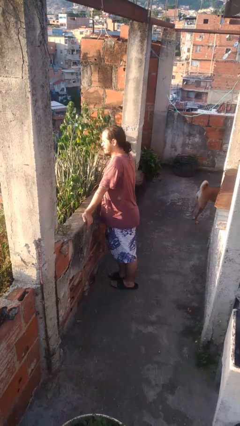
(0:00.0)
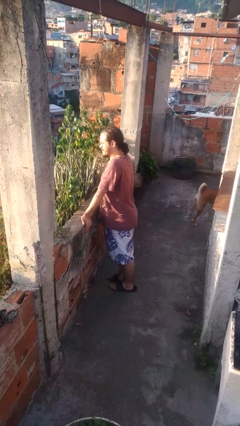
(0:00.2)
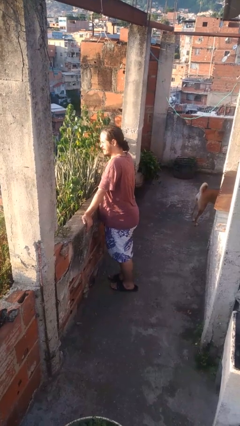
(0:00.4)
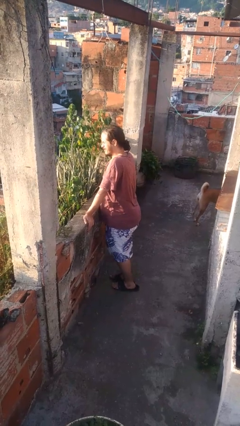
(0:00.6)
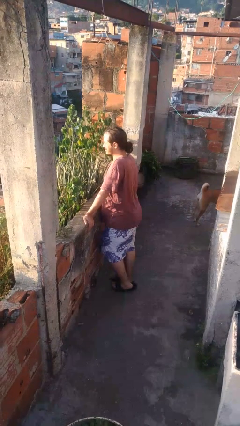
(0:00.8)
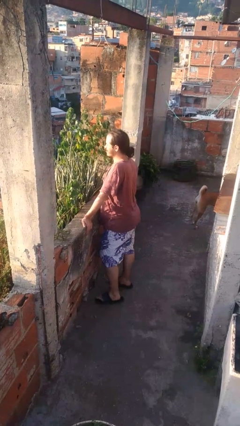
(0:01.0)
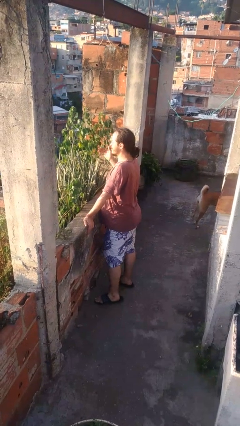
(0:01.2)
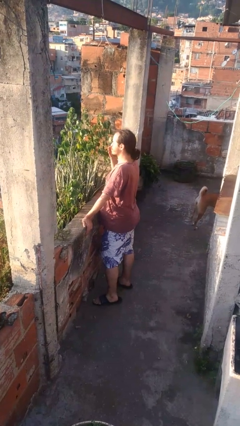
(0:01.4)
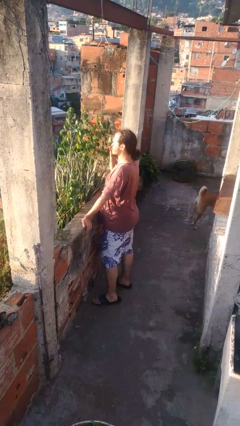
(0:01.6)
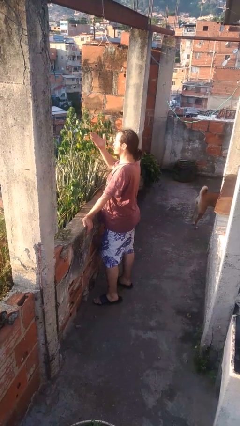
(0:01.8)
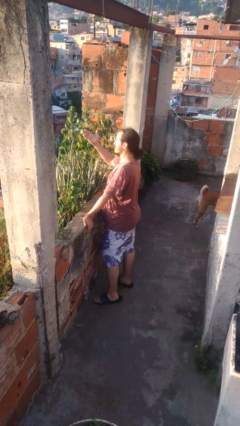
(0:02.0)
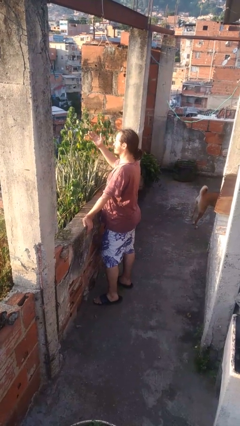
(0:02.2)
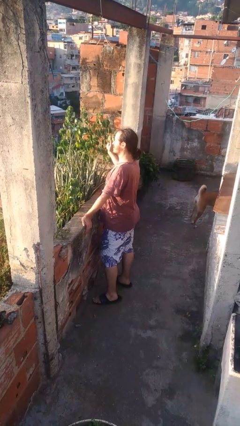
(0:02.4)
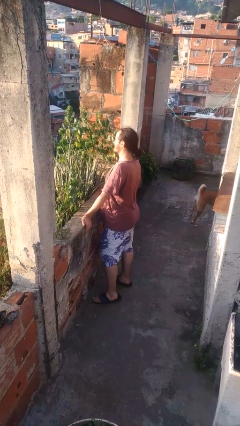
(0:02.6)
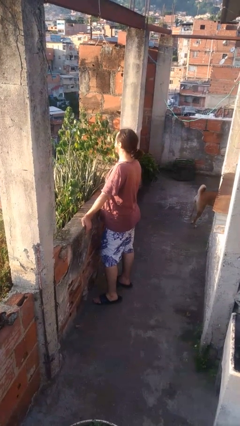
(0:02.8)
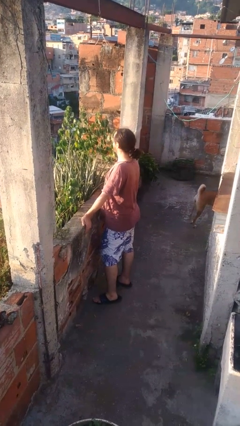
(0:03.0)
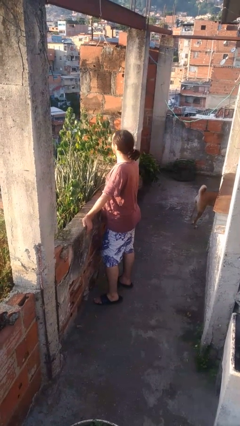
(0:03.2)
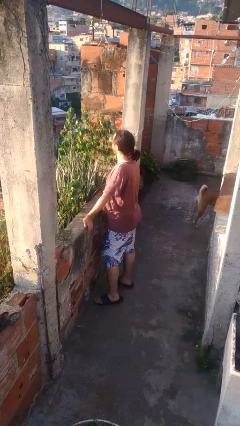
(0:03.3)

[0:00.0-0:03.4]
person gestures blow kiss

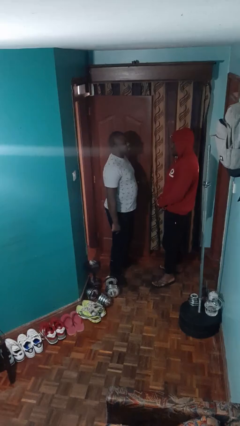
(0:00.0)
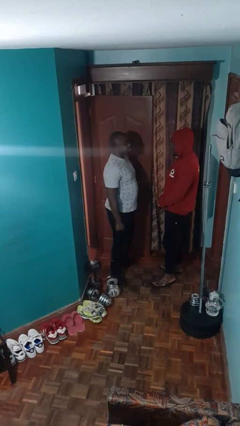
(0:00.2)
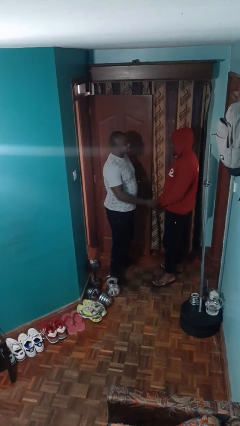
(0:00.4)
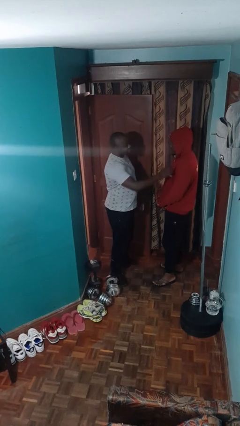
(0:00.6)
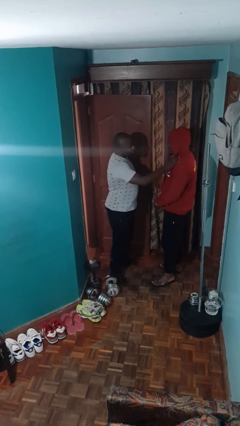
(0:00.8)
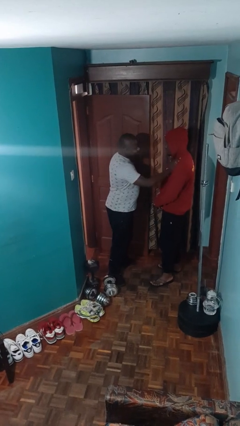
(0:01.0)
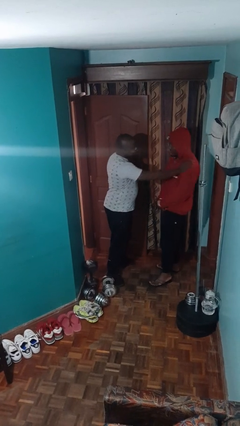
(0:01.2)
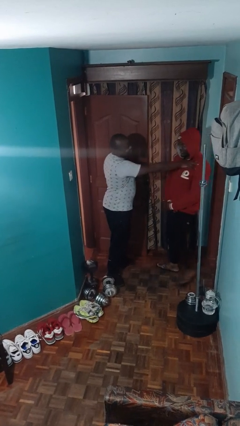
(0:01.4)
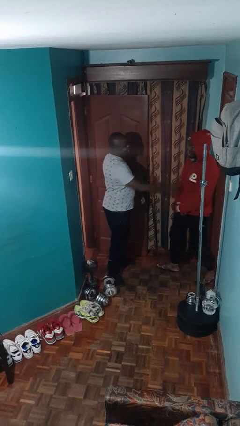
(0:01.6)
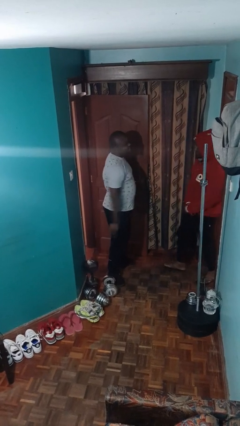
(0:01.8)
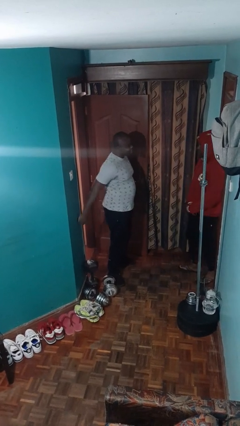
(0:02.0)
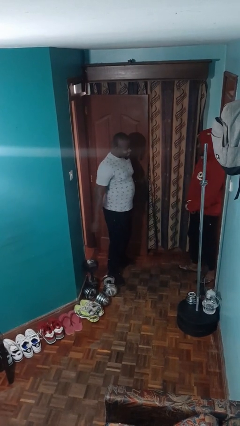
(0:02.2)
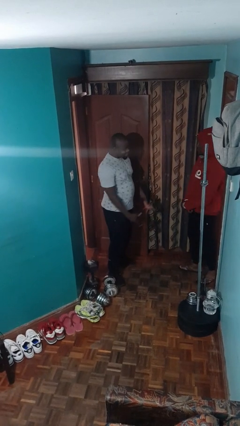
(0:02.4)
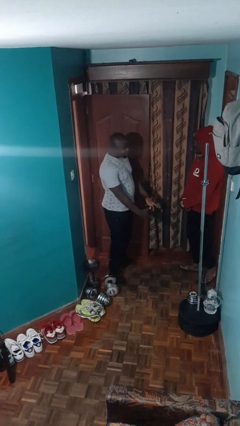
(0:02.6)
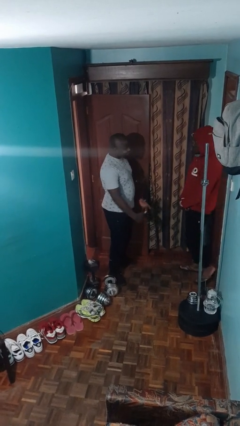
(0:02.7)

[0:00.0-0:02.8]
person shoves person

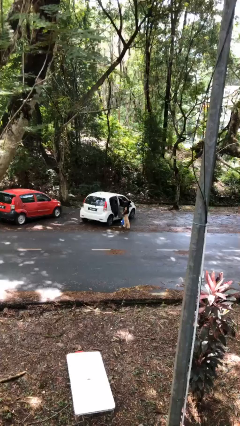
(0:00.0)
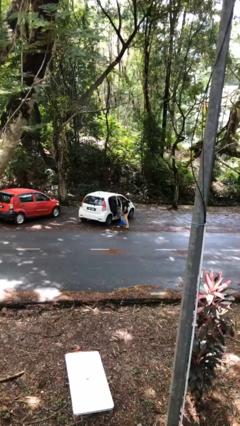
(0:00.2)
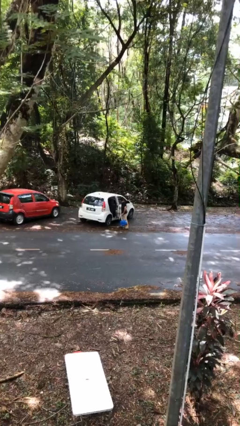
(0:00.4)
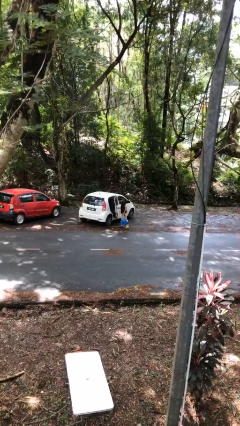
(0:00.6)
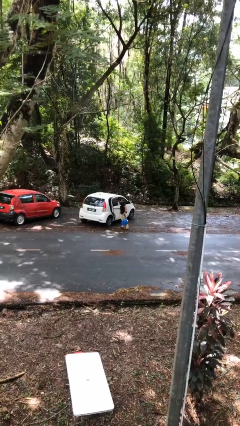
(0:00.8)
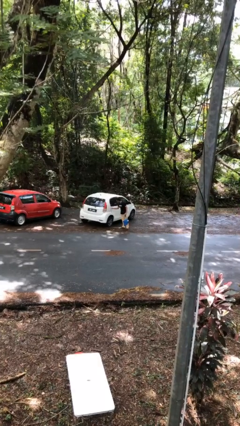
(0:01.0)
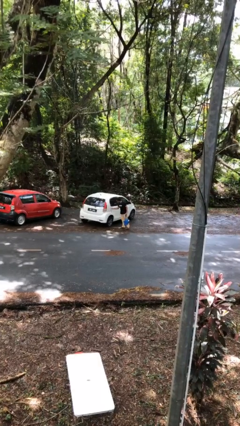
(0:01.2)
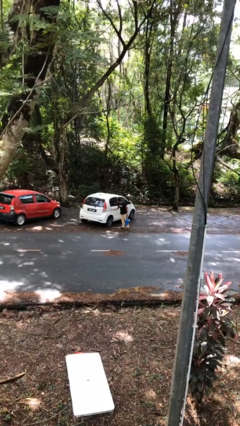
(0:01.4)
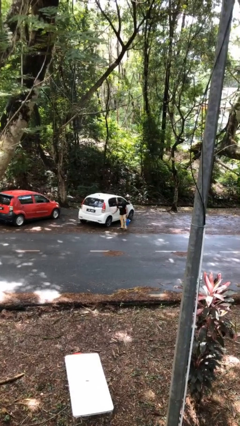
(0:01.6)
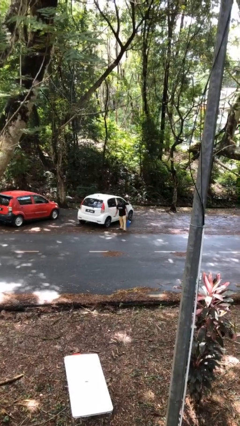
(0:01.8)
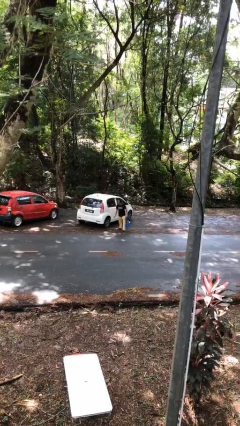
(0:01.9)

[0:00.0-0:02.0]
person closes car door

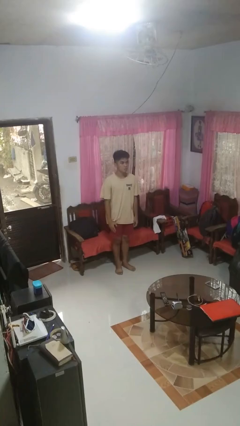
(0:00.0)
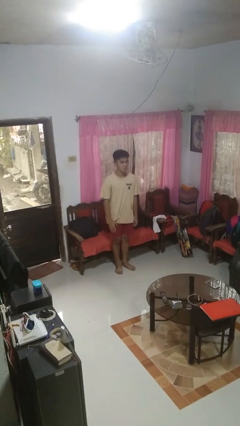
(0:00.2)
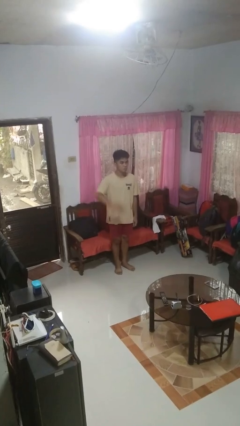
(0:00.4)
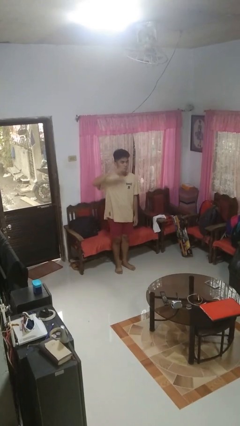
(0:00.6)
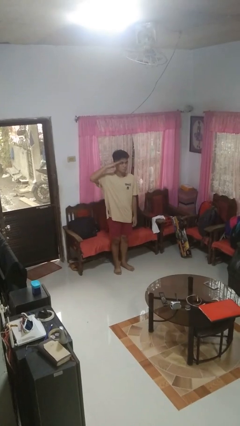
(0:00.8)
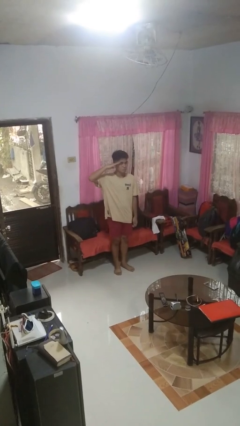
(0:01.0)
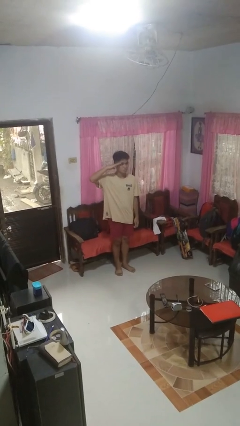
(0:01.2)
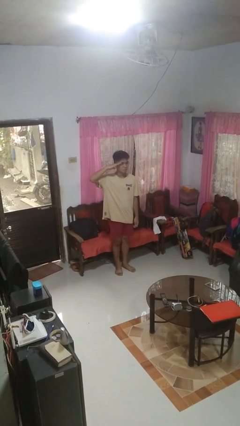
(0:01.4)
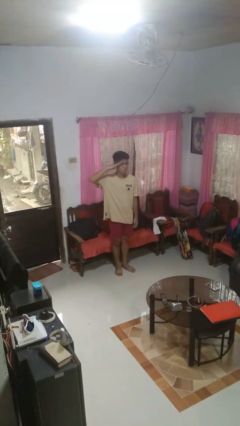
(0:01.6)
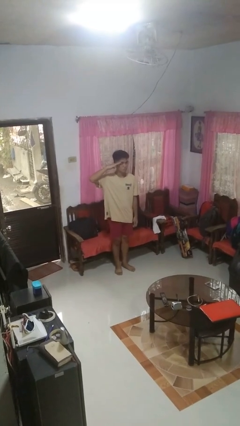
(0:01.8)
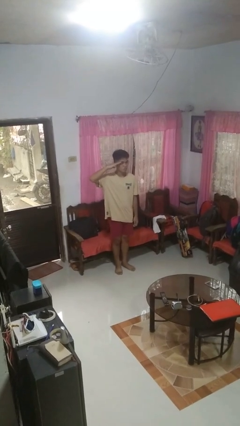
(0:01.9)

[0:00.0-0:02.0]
person salutes

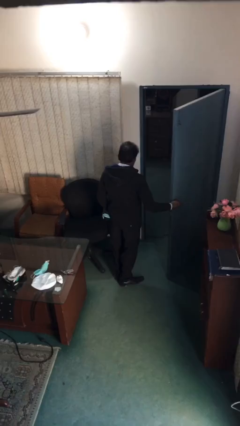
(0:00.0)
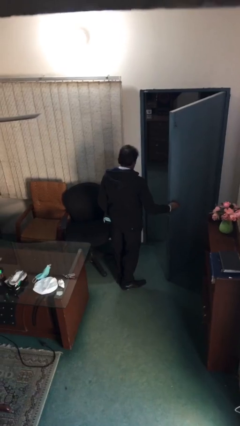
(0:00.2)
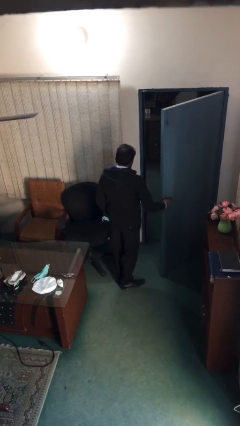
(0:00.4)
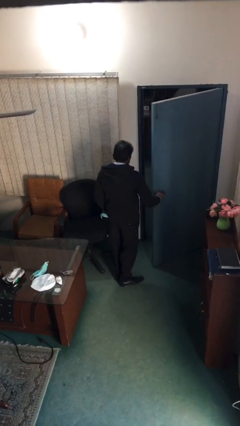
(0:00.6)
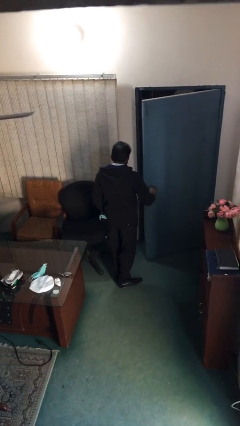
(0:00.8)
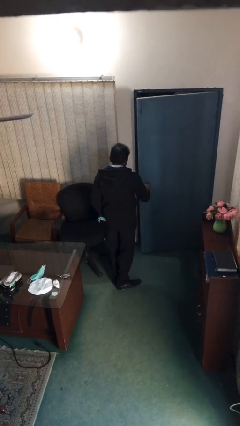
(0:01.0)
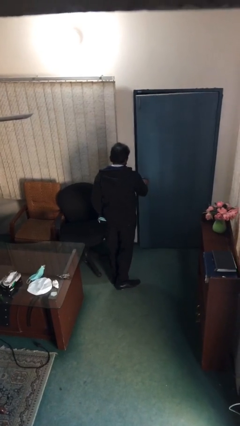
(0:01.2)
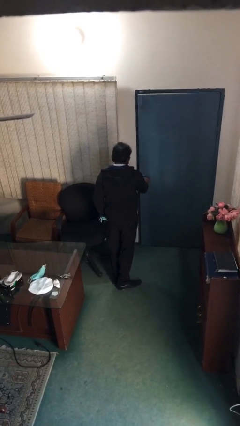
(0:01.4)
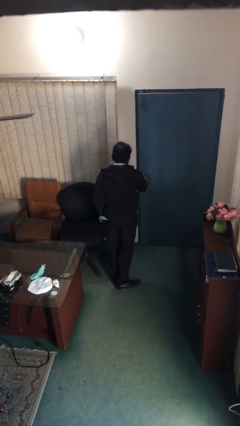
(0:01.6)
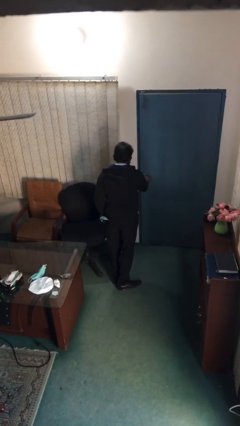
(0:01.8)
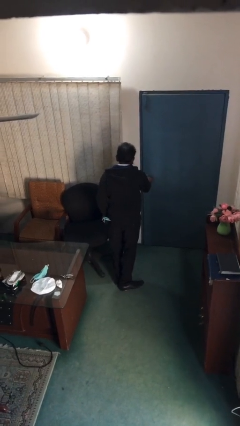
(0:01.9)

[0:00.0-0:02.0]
person closes facility door

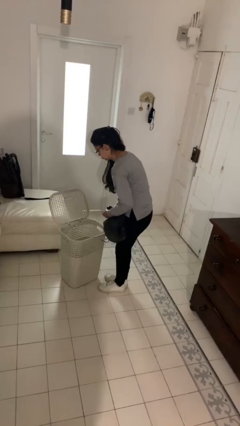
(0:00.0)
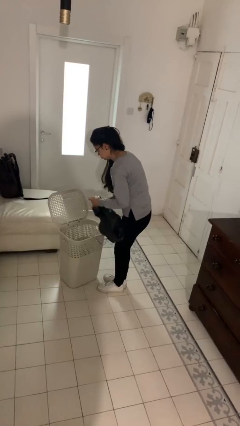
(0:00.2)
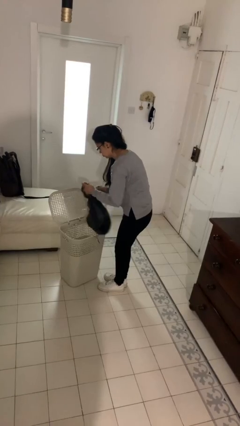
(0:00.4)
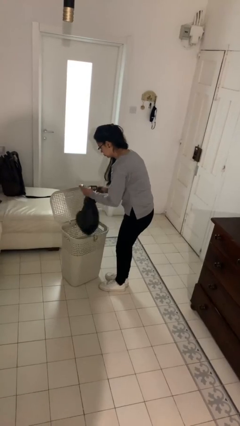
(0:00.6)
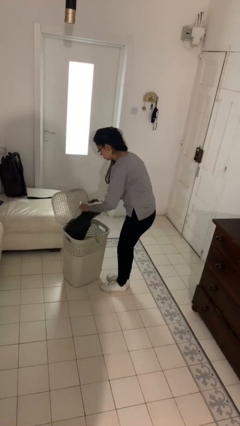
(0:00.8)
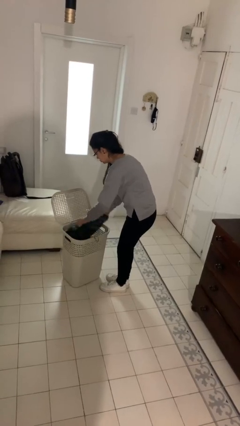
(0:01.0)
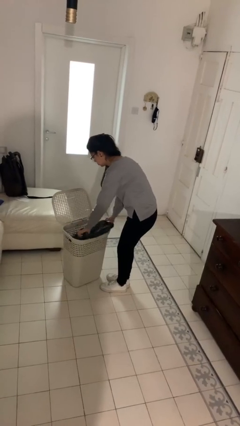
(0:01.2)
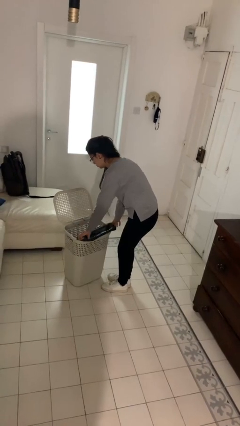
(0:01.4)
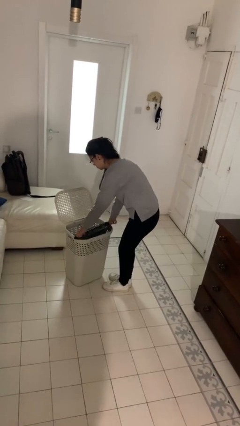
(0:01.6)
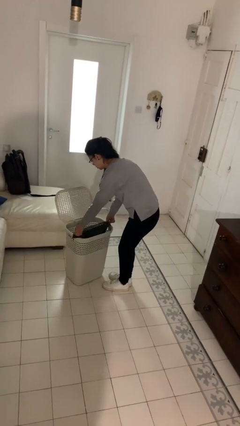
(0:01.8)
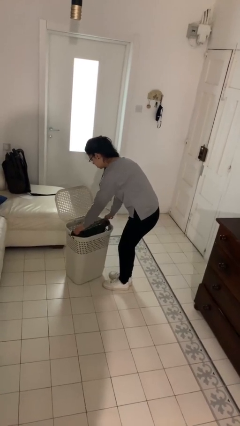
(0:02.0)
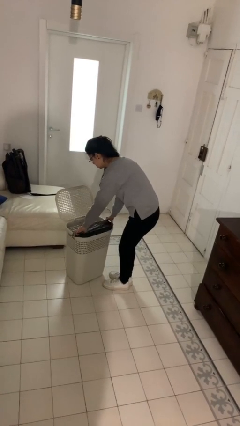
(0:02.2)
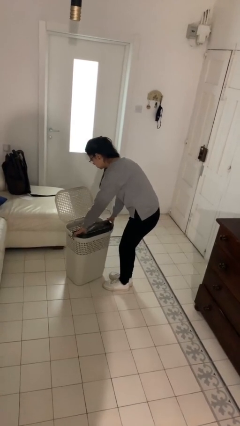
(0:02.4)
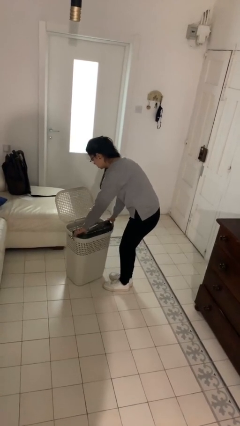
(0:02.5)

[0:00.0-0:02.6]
person inserts trashbag into trashcan

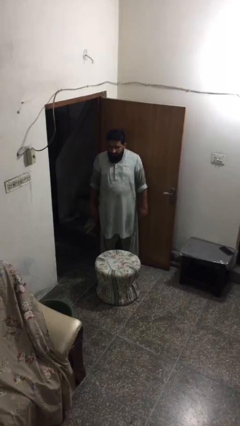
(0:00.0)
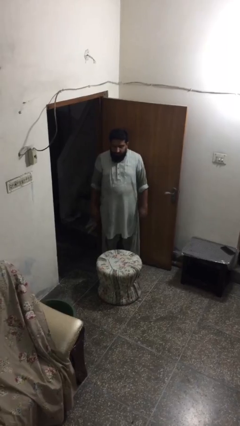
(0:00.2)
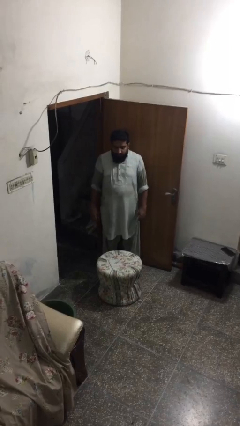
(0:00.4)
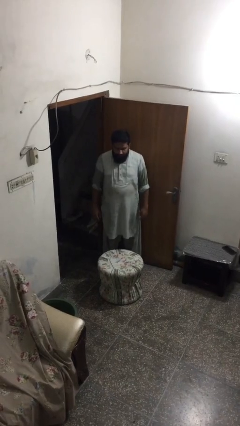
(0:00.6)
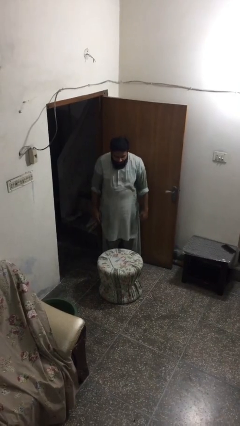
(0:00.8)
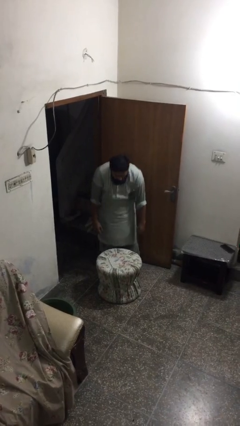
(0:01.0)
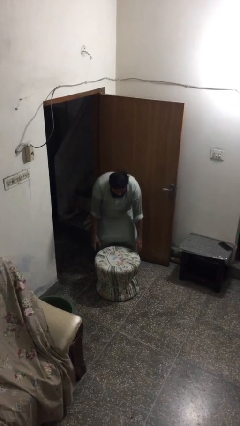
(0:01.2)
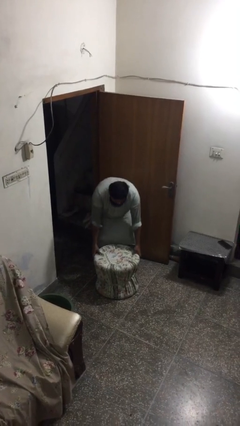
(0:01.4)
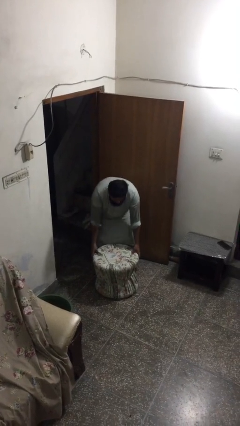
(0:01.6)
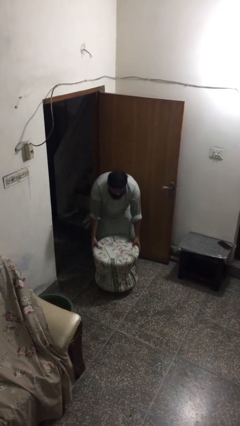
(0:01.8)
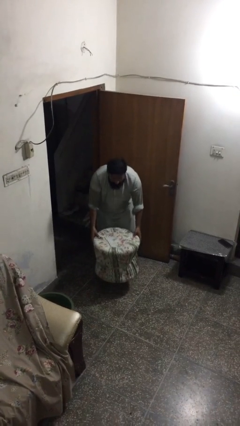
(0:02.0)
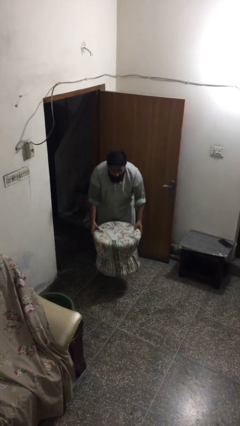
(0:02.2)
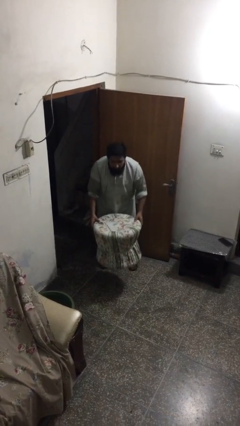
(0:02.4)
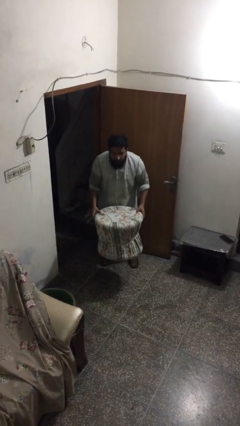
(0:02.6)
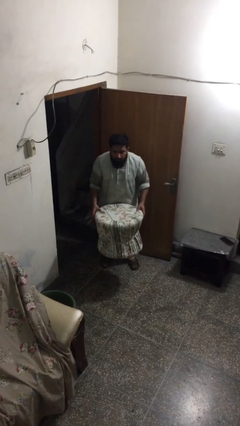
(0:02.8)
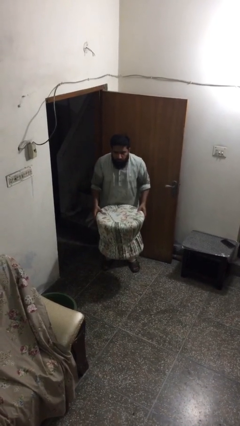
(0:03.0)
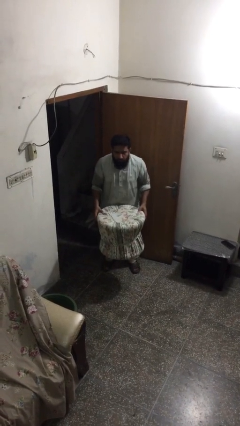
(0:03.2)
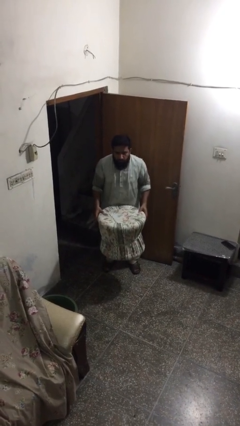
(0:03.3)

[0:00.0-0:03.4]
person picks up object from floor
